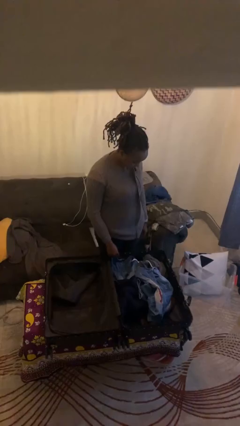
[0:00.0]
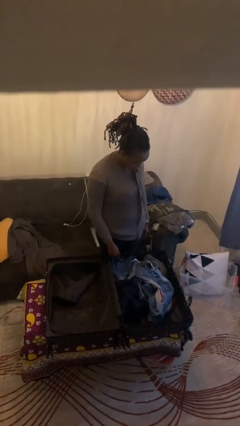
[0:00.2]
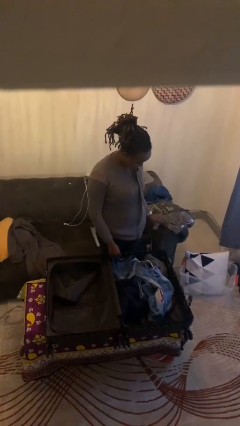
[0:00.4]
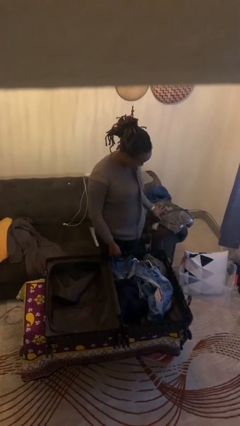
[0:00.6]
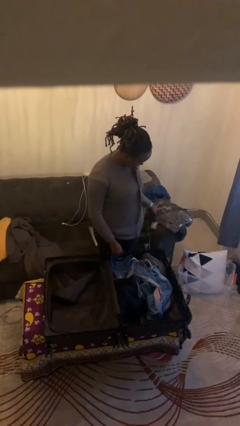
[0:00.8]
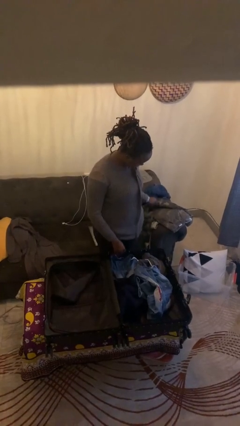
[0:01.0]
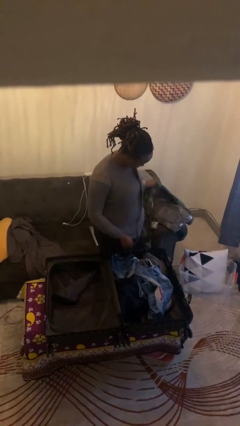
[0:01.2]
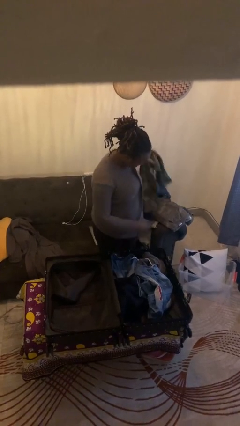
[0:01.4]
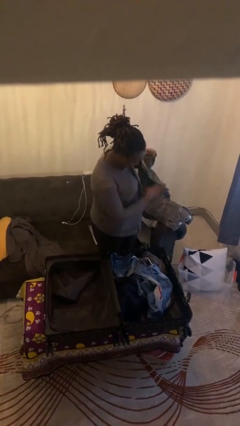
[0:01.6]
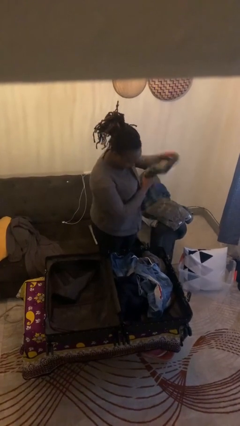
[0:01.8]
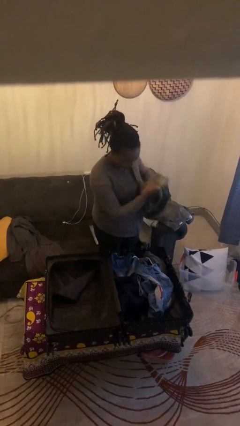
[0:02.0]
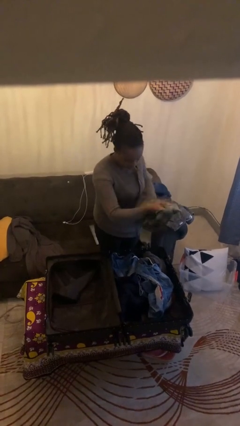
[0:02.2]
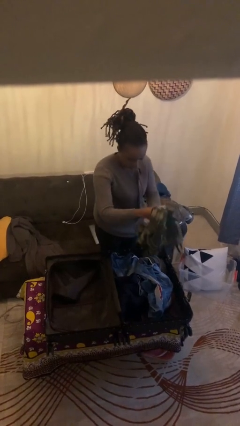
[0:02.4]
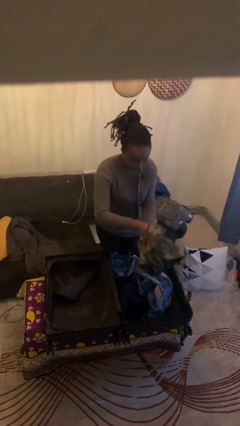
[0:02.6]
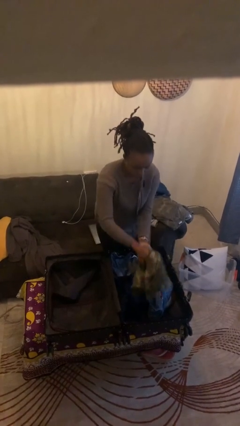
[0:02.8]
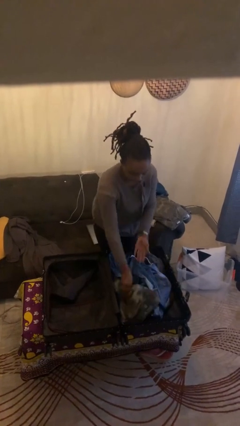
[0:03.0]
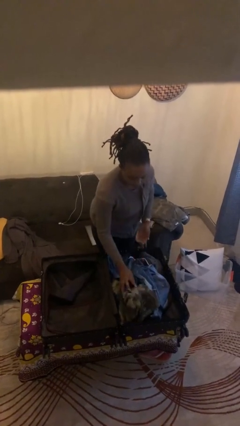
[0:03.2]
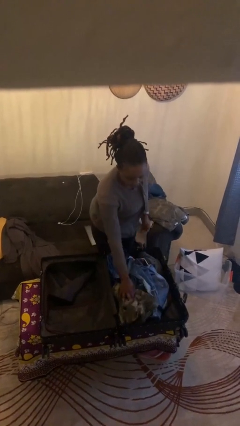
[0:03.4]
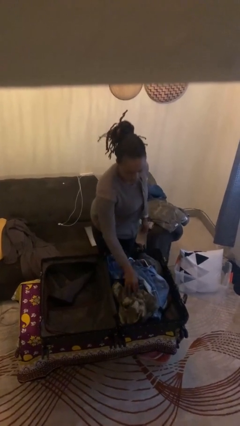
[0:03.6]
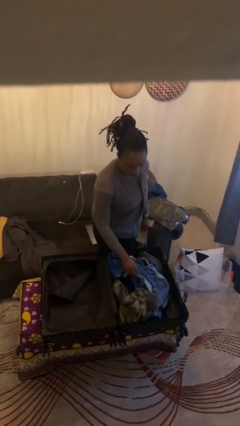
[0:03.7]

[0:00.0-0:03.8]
person loads clothes into suitcase

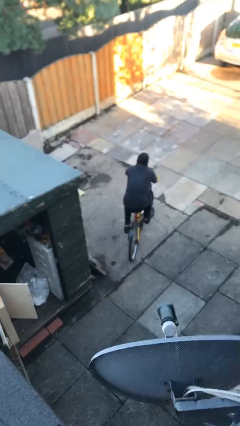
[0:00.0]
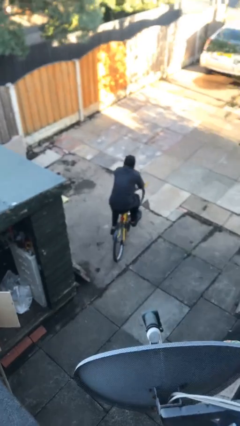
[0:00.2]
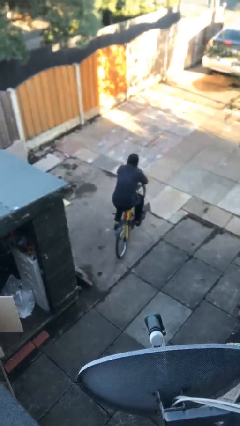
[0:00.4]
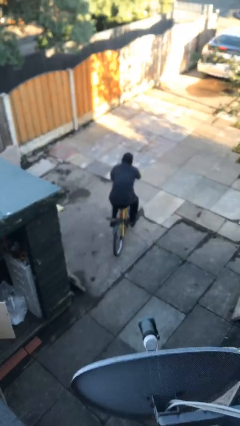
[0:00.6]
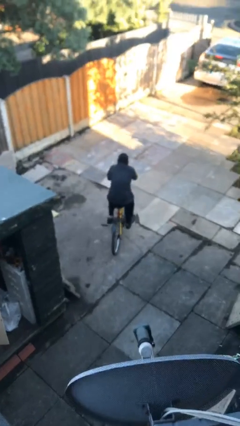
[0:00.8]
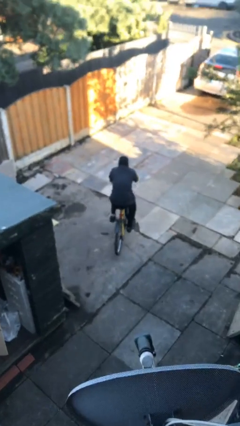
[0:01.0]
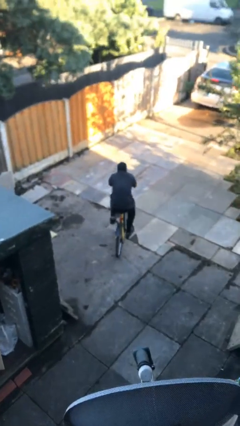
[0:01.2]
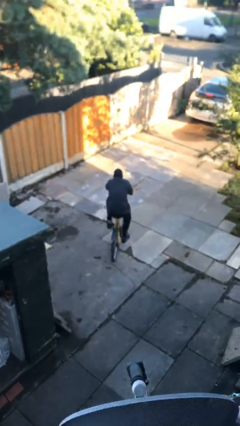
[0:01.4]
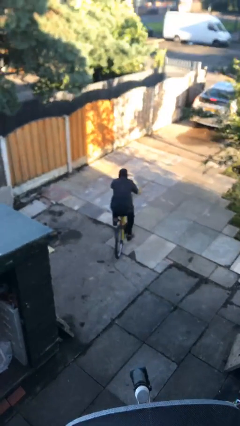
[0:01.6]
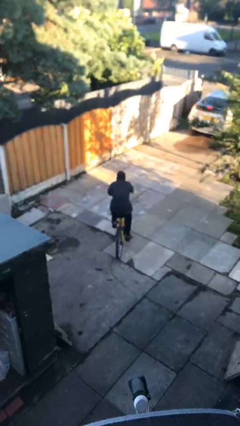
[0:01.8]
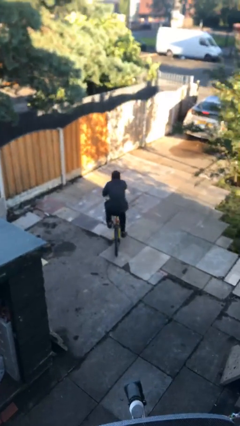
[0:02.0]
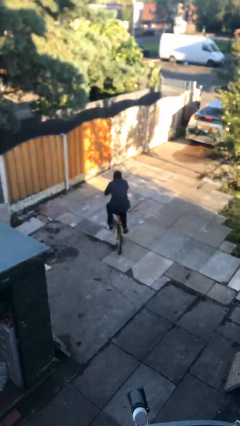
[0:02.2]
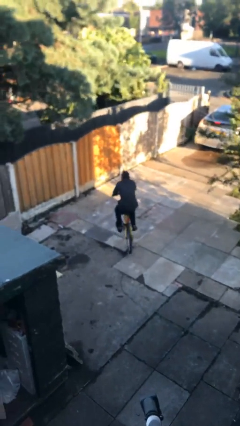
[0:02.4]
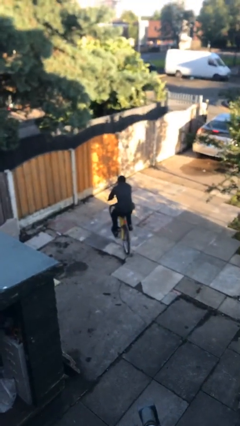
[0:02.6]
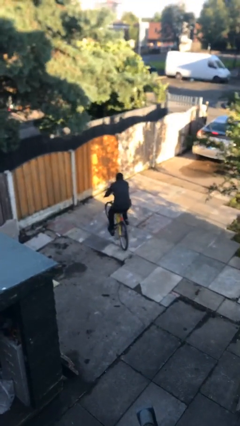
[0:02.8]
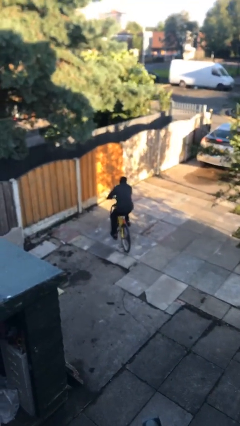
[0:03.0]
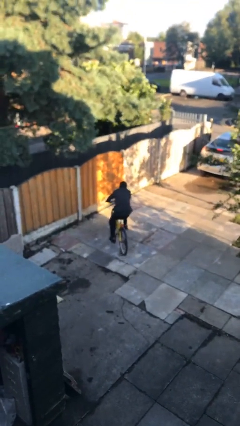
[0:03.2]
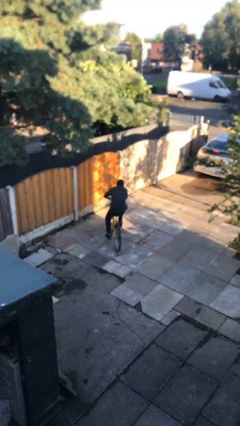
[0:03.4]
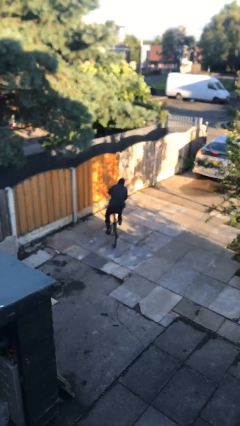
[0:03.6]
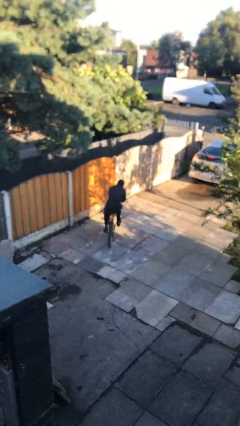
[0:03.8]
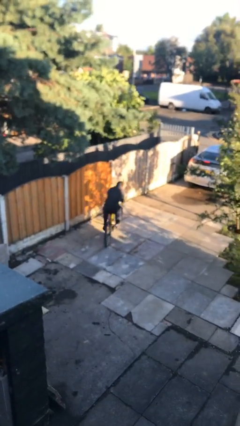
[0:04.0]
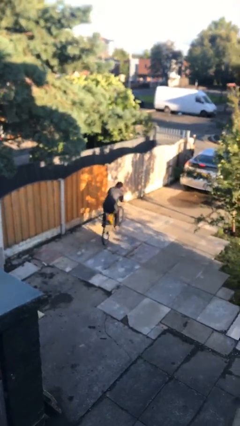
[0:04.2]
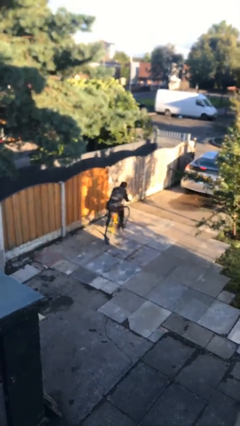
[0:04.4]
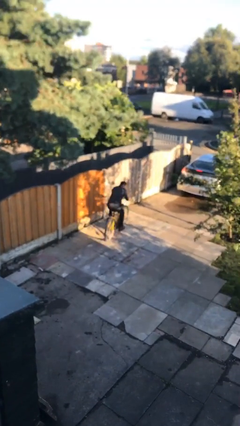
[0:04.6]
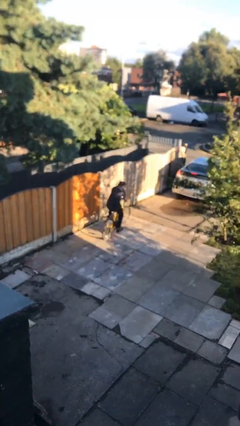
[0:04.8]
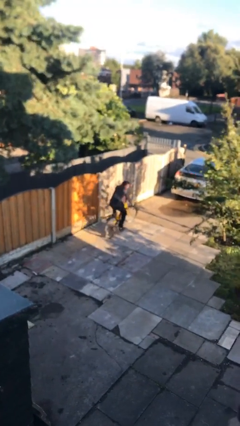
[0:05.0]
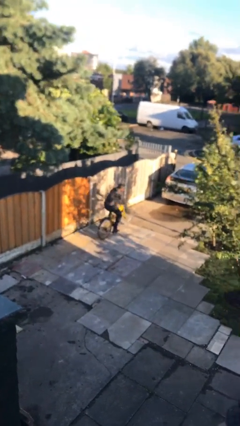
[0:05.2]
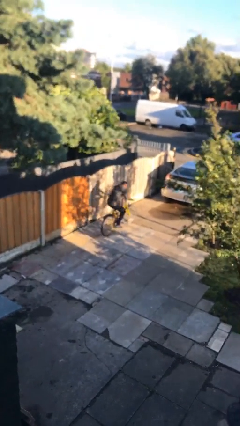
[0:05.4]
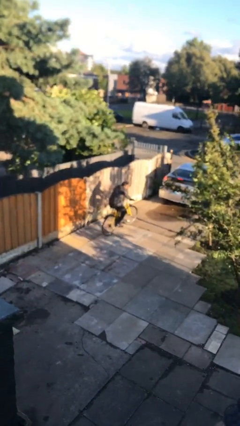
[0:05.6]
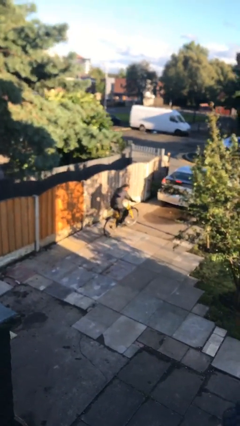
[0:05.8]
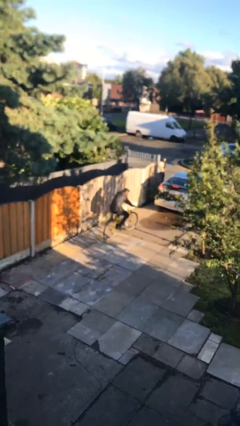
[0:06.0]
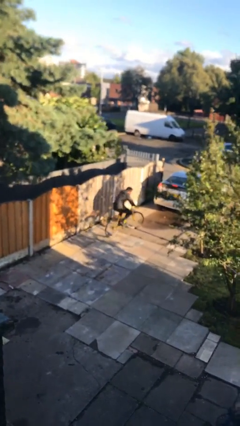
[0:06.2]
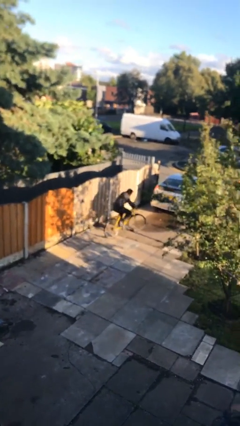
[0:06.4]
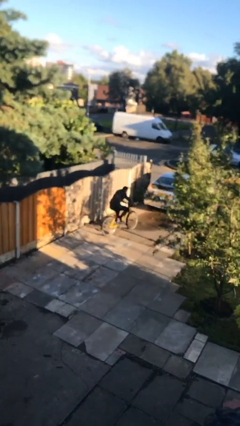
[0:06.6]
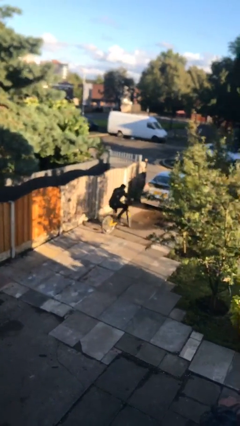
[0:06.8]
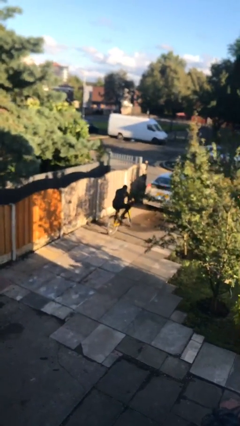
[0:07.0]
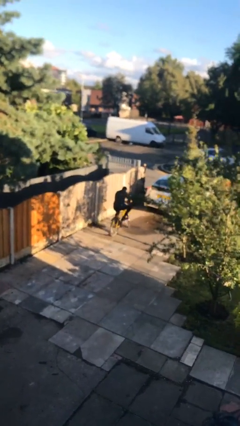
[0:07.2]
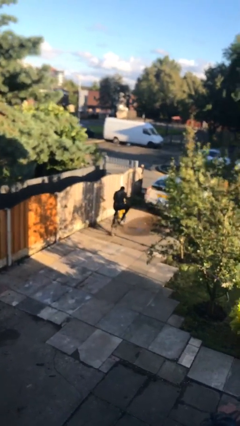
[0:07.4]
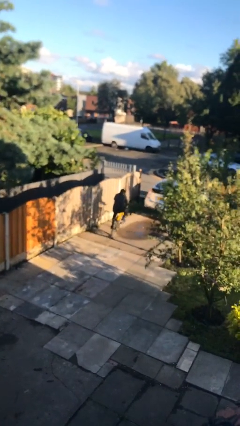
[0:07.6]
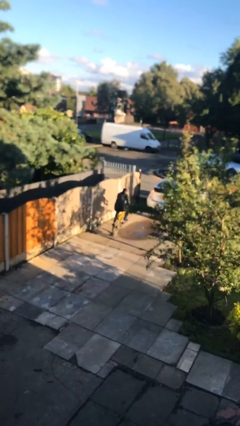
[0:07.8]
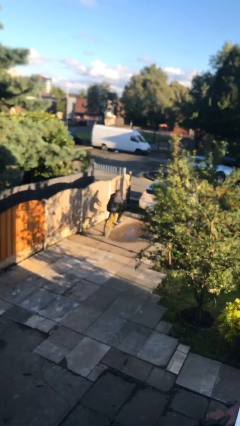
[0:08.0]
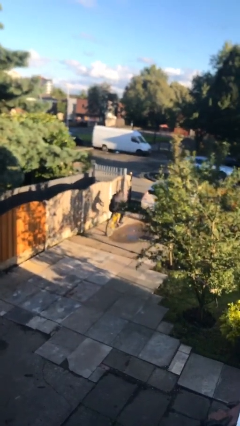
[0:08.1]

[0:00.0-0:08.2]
person rides bicycle

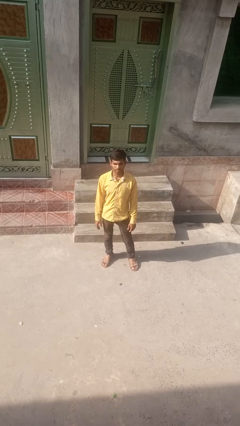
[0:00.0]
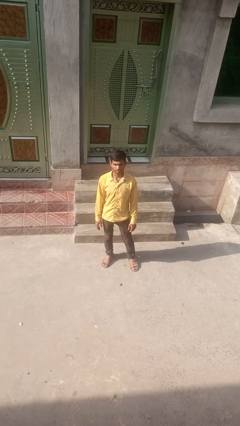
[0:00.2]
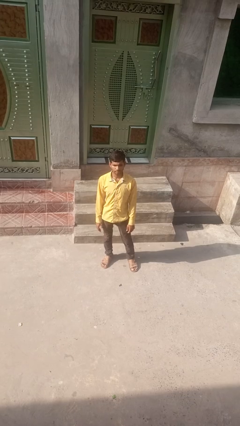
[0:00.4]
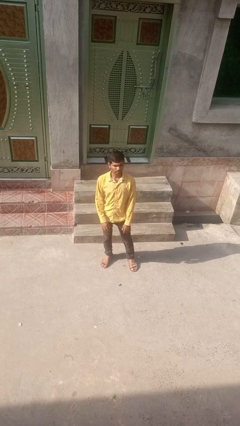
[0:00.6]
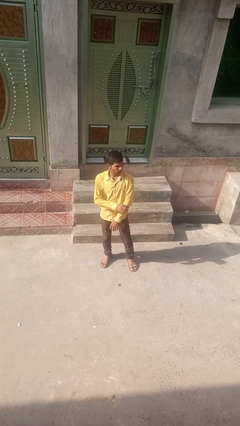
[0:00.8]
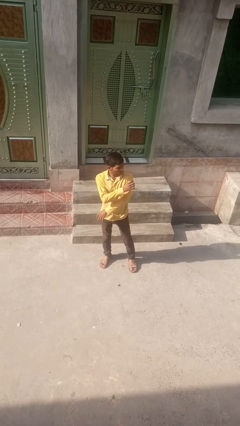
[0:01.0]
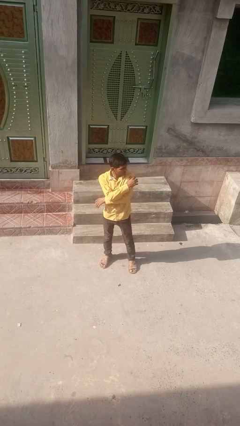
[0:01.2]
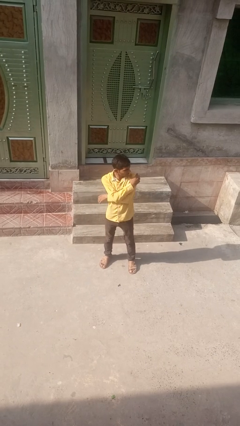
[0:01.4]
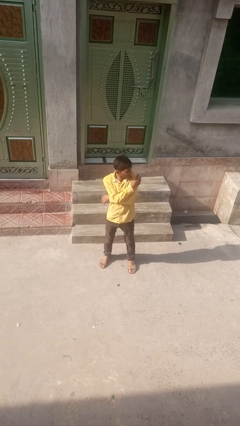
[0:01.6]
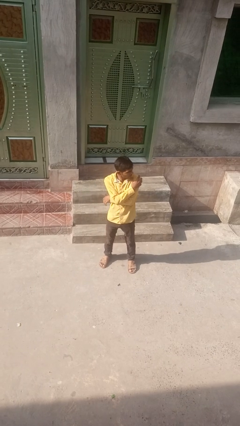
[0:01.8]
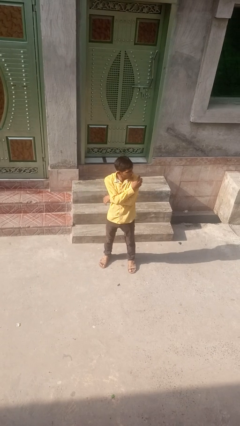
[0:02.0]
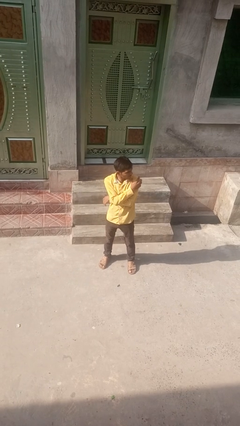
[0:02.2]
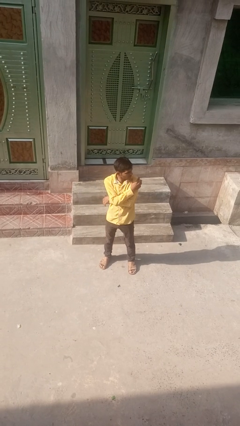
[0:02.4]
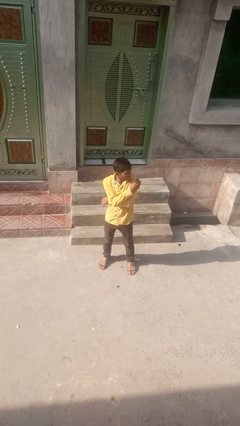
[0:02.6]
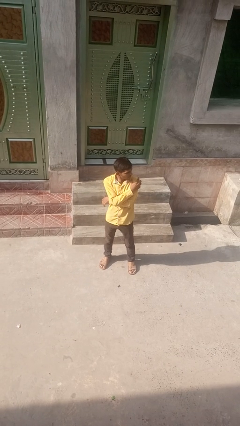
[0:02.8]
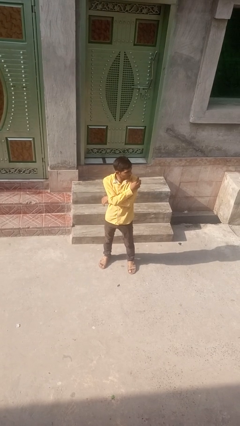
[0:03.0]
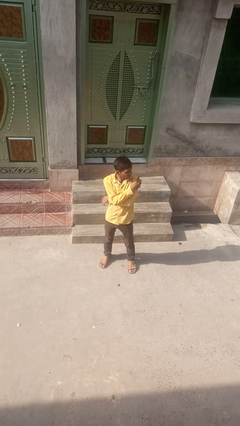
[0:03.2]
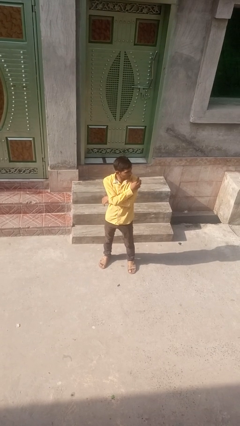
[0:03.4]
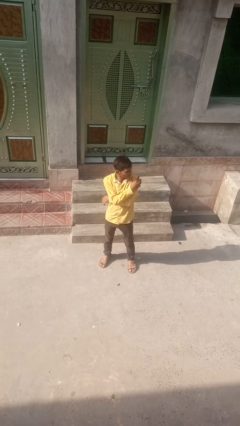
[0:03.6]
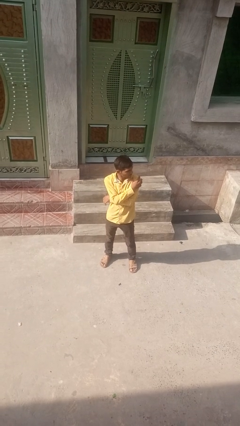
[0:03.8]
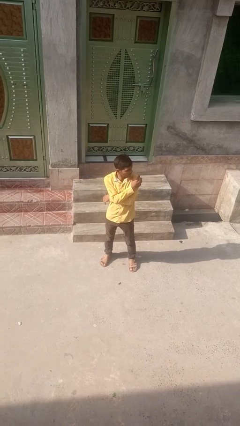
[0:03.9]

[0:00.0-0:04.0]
person crosses arms

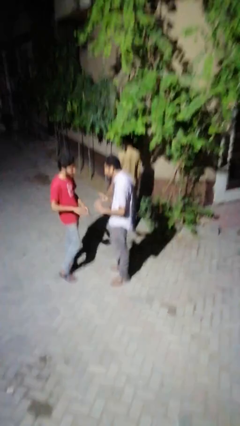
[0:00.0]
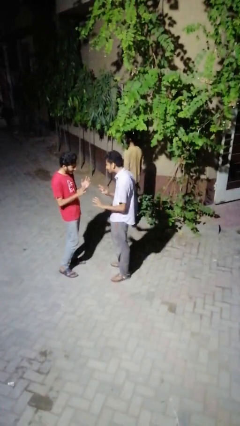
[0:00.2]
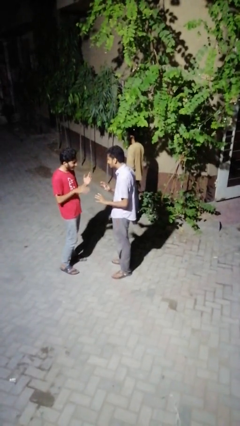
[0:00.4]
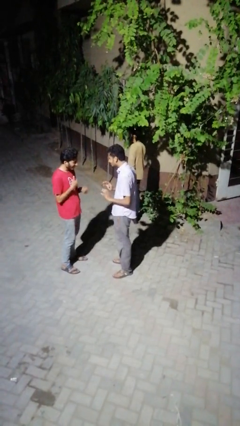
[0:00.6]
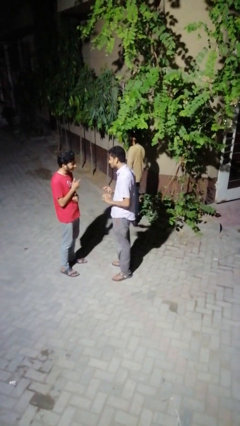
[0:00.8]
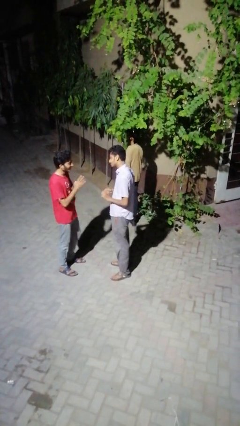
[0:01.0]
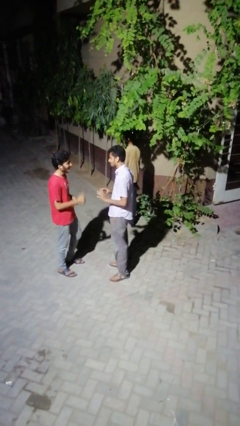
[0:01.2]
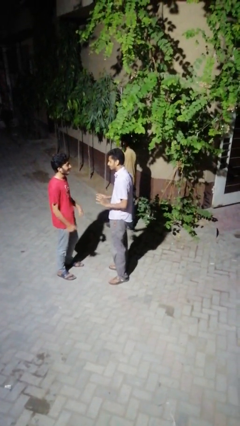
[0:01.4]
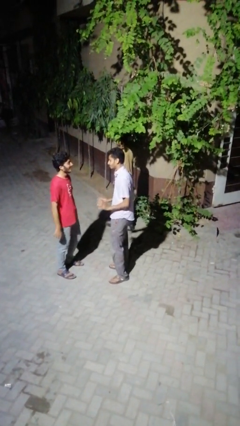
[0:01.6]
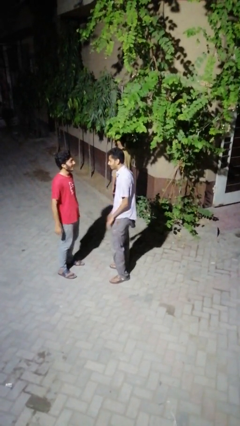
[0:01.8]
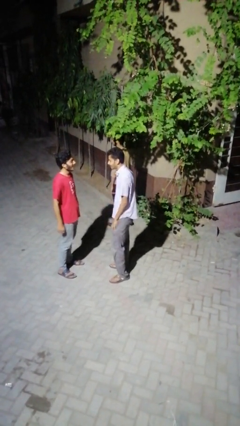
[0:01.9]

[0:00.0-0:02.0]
person talks to person
